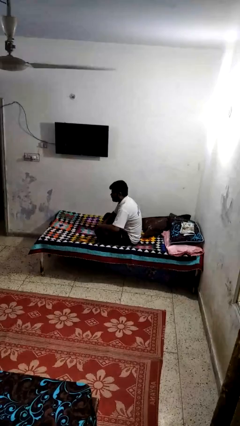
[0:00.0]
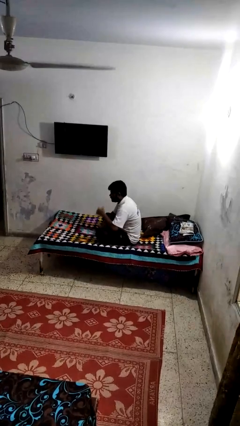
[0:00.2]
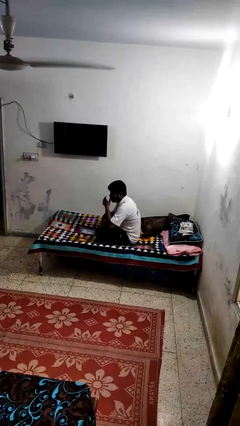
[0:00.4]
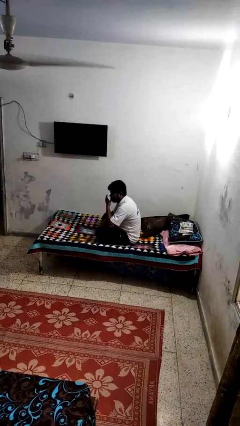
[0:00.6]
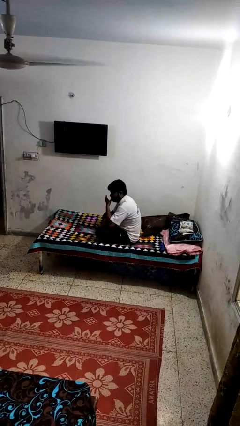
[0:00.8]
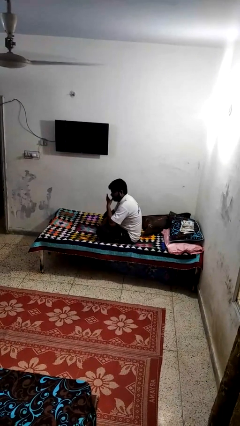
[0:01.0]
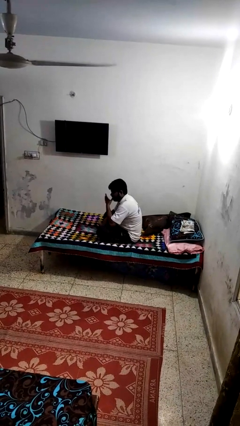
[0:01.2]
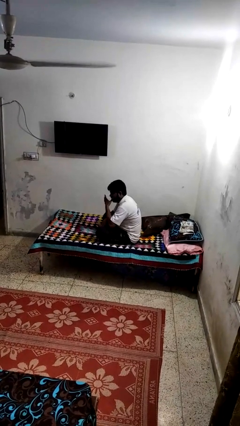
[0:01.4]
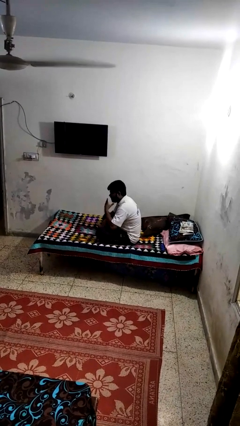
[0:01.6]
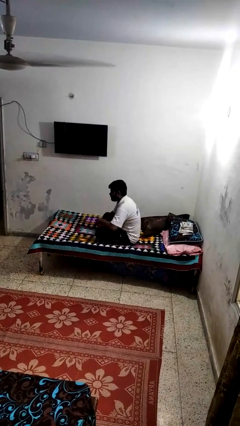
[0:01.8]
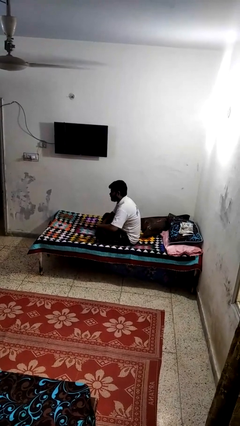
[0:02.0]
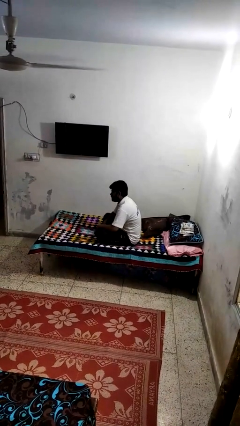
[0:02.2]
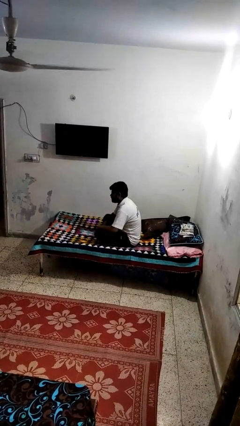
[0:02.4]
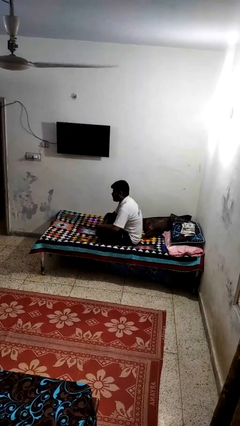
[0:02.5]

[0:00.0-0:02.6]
person scratches face

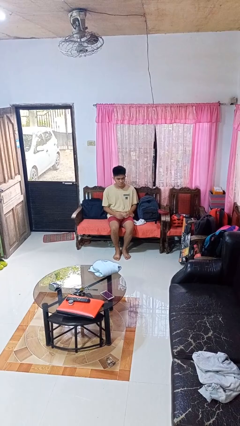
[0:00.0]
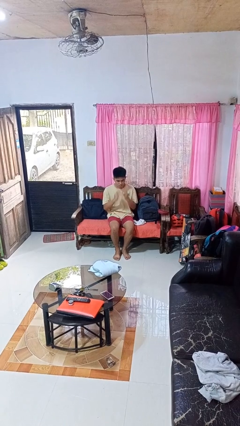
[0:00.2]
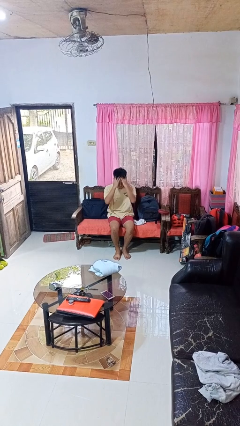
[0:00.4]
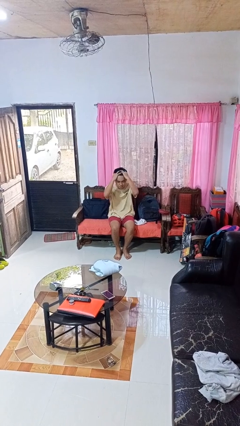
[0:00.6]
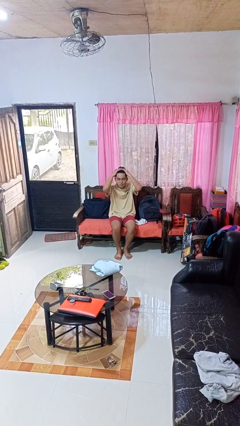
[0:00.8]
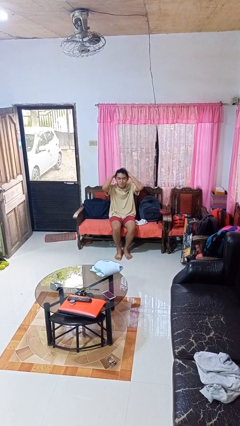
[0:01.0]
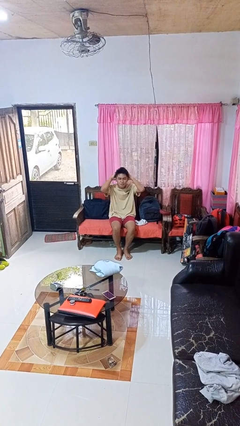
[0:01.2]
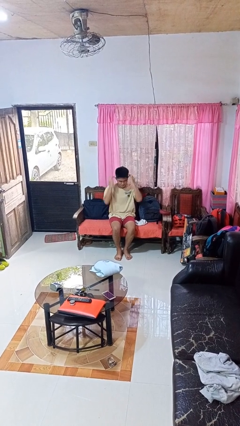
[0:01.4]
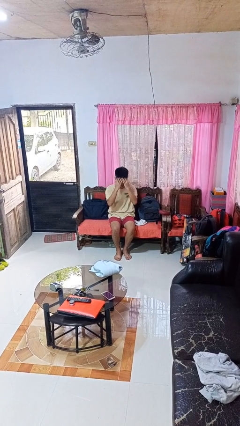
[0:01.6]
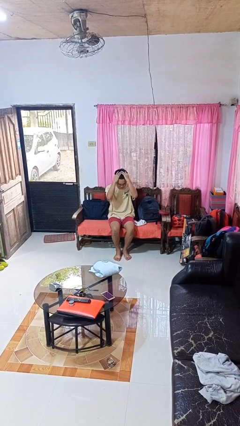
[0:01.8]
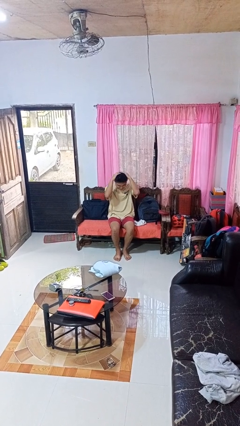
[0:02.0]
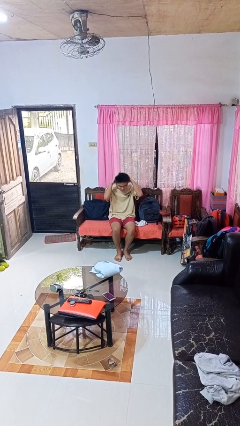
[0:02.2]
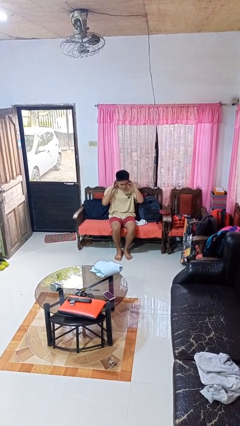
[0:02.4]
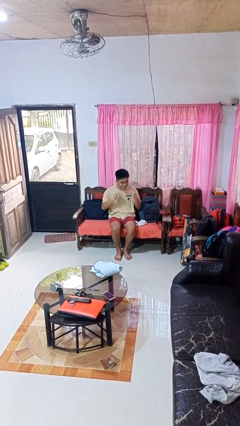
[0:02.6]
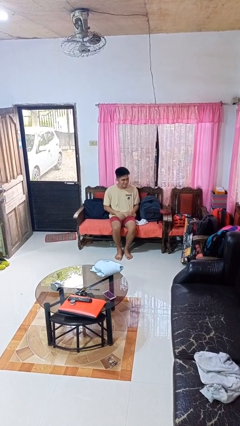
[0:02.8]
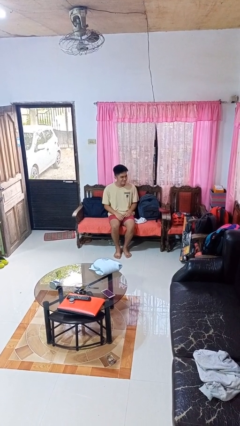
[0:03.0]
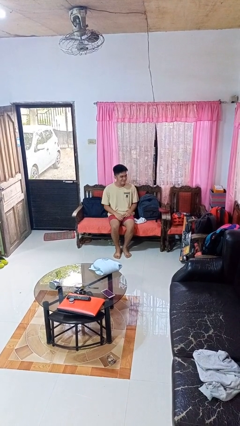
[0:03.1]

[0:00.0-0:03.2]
person strokes hair

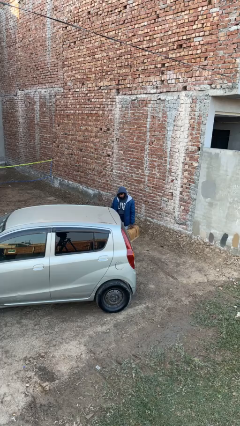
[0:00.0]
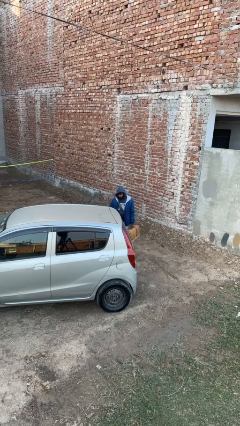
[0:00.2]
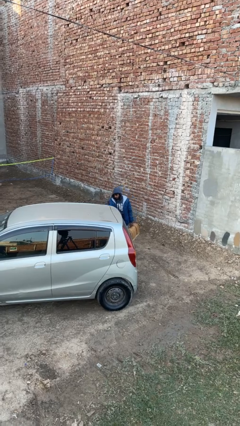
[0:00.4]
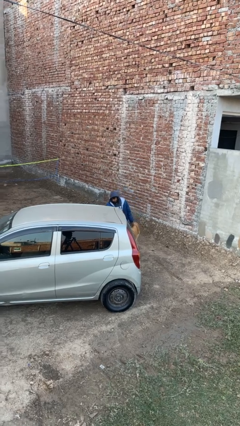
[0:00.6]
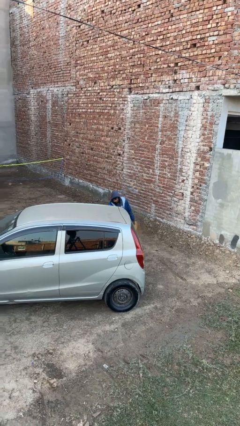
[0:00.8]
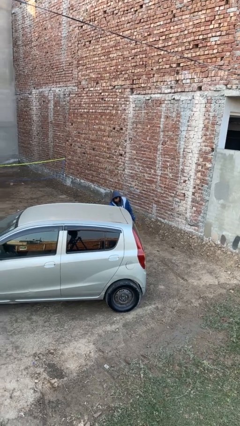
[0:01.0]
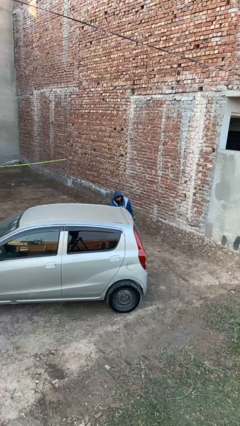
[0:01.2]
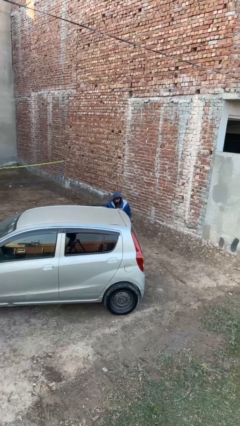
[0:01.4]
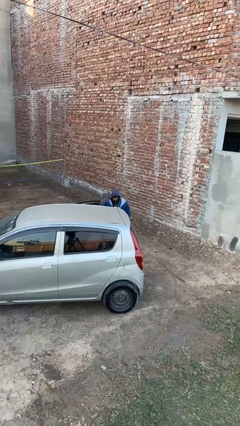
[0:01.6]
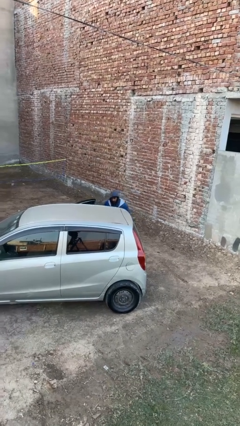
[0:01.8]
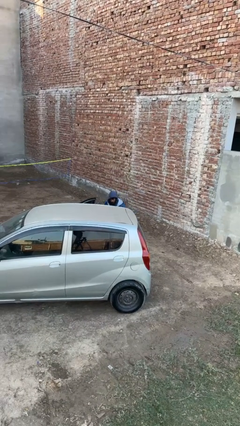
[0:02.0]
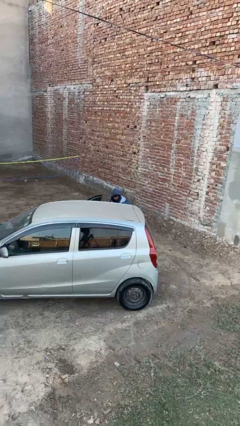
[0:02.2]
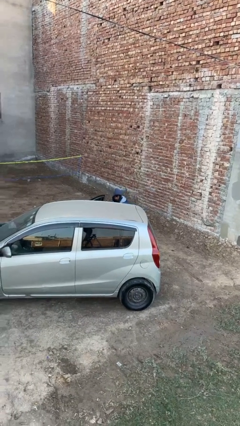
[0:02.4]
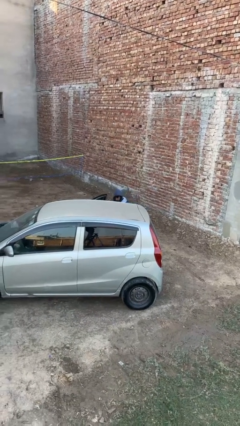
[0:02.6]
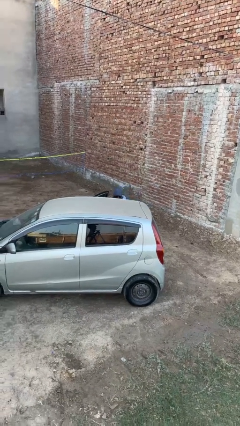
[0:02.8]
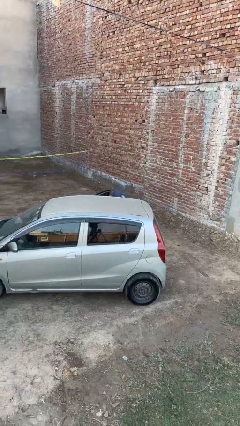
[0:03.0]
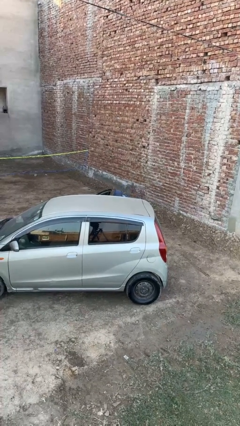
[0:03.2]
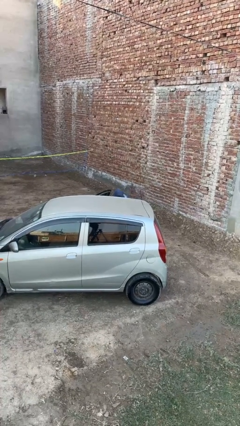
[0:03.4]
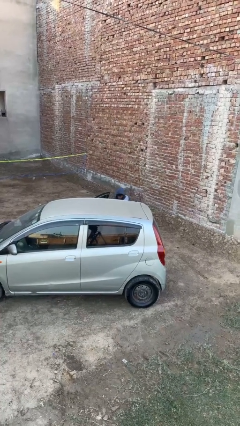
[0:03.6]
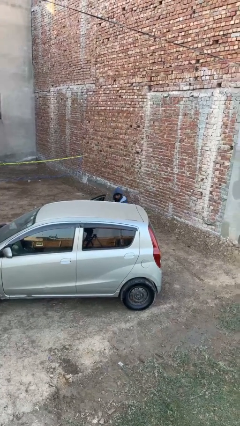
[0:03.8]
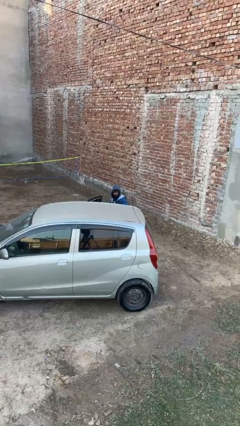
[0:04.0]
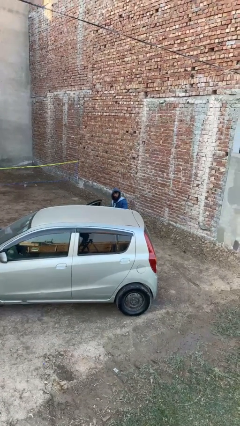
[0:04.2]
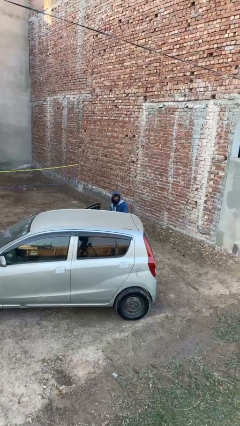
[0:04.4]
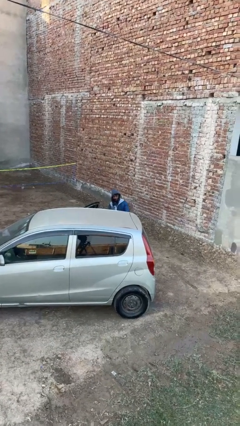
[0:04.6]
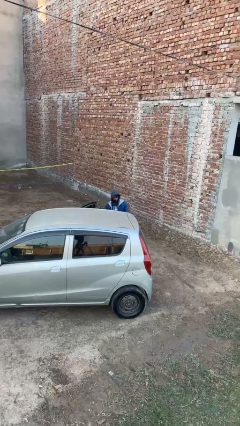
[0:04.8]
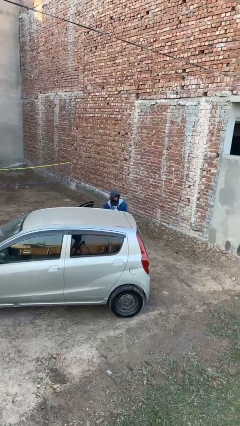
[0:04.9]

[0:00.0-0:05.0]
person loads car

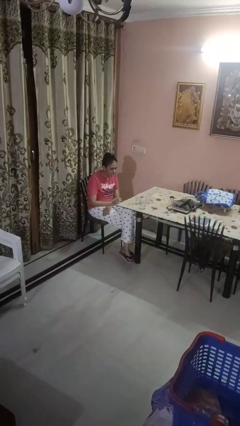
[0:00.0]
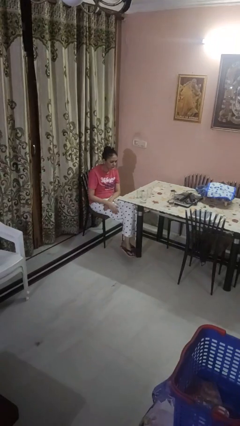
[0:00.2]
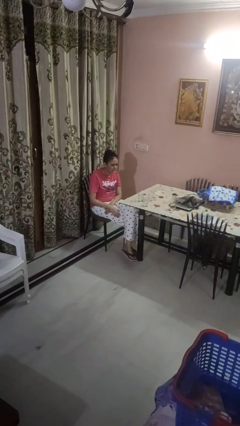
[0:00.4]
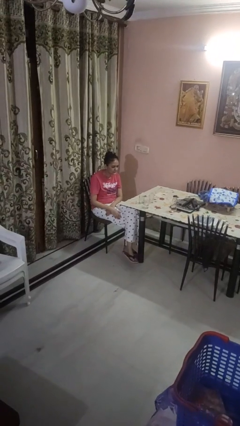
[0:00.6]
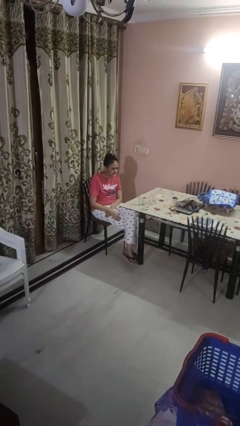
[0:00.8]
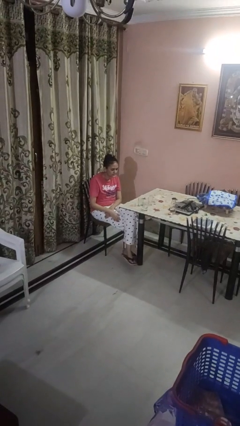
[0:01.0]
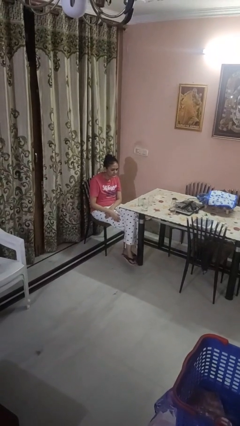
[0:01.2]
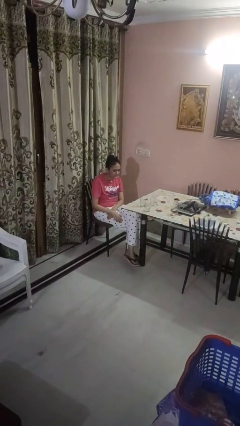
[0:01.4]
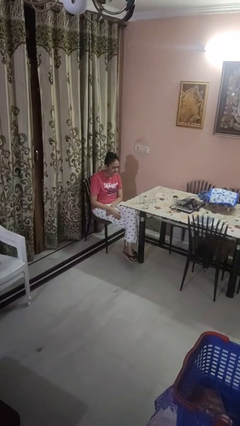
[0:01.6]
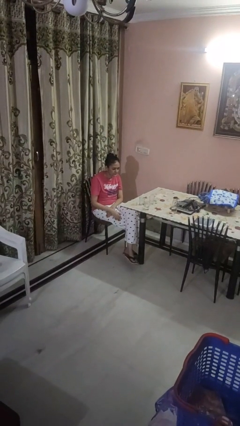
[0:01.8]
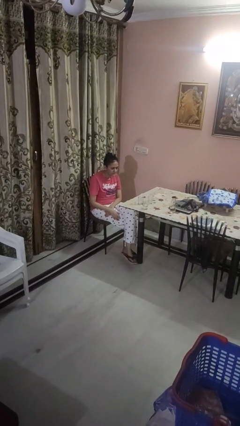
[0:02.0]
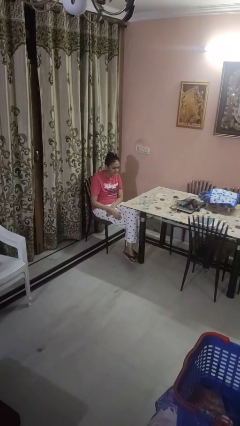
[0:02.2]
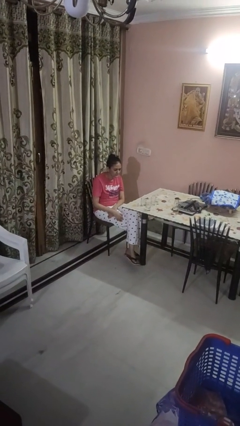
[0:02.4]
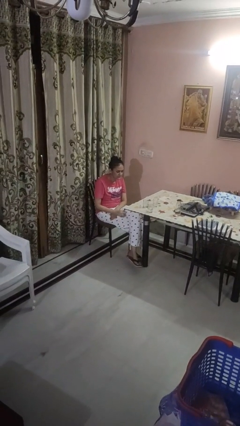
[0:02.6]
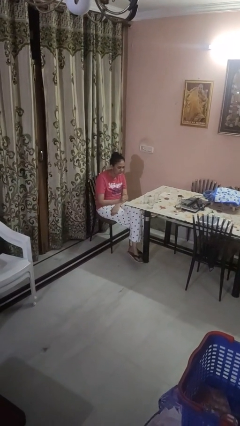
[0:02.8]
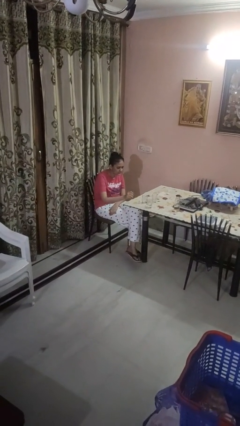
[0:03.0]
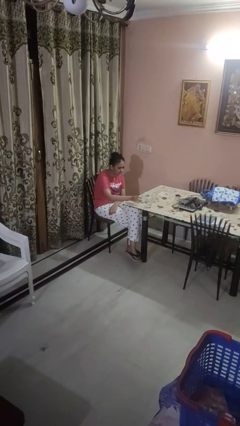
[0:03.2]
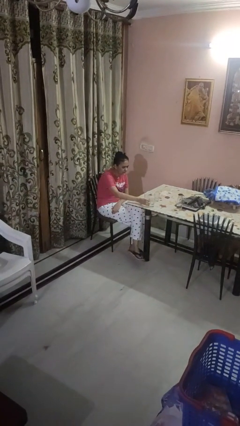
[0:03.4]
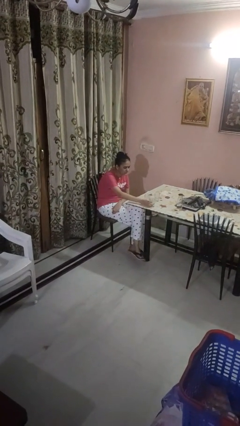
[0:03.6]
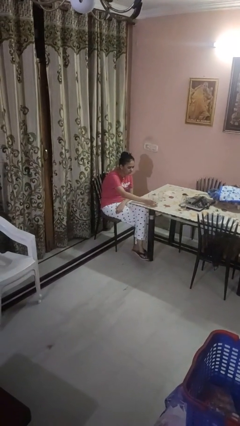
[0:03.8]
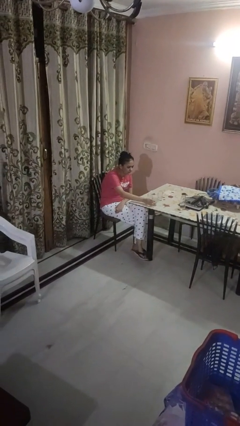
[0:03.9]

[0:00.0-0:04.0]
person puts down object on table

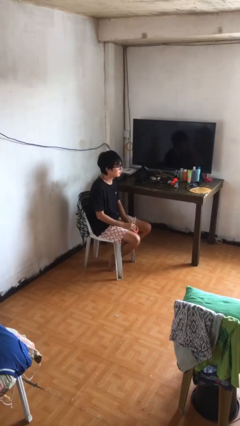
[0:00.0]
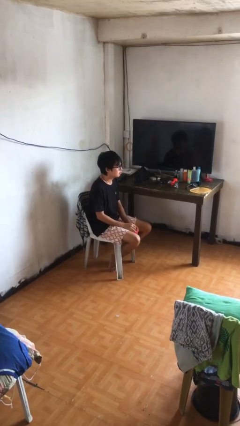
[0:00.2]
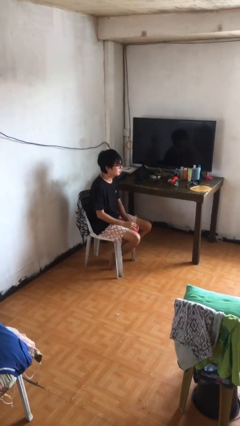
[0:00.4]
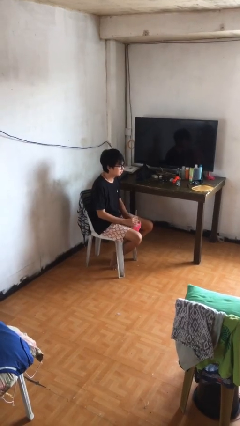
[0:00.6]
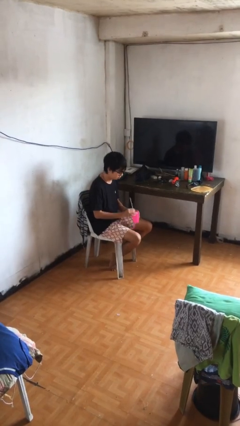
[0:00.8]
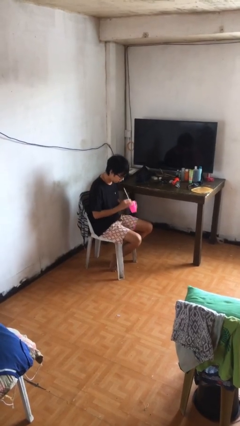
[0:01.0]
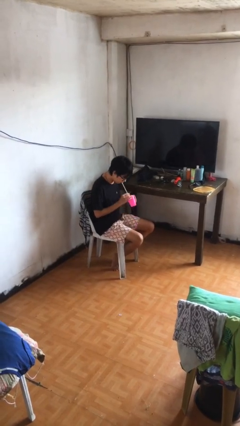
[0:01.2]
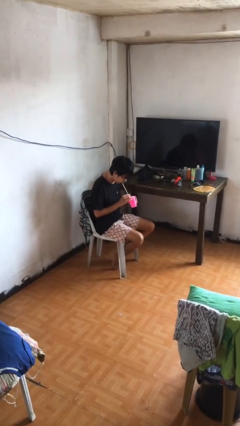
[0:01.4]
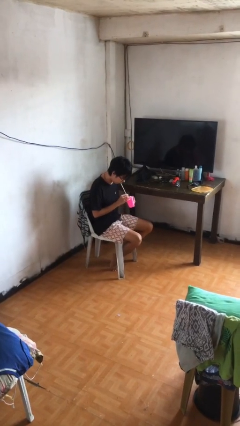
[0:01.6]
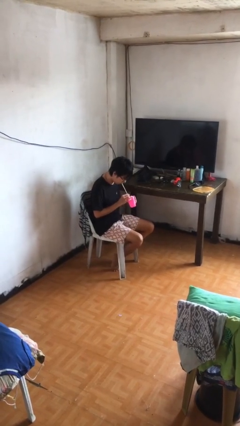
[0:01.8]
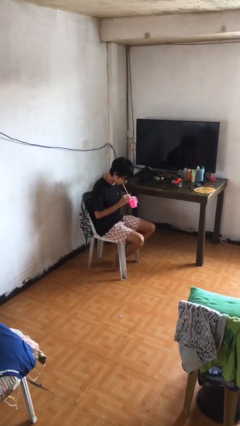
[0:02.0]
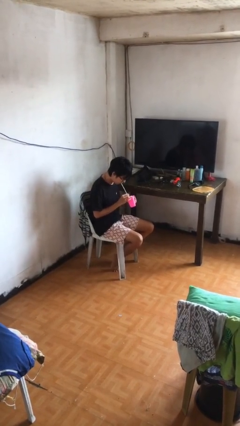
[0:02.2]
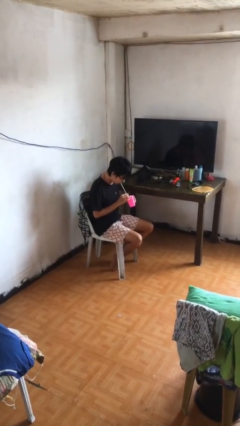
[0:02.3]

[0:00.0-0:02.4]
person drinks from straw

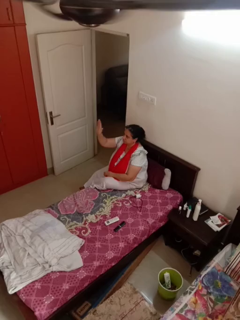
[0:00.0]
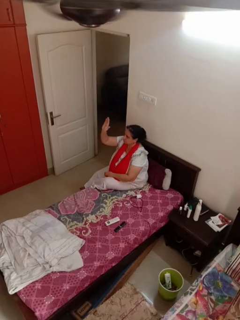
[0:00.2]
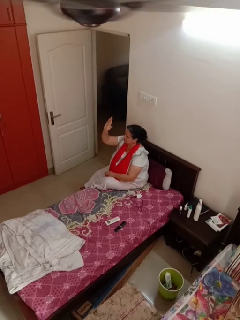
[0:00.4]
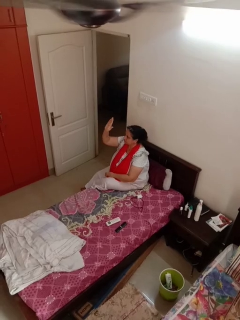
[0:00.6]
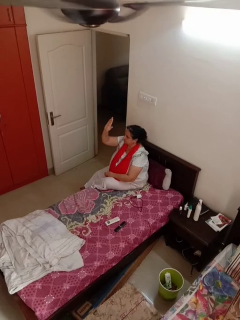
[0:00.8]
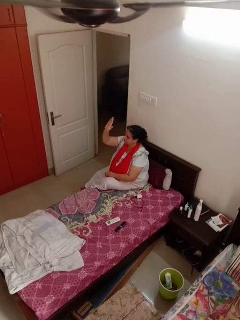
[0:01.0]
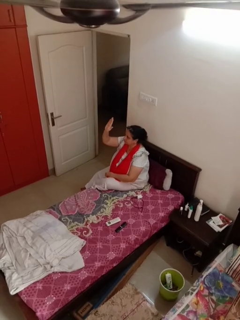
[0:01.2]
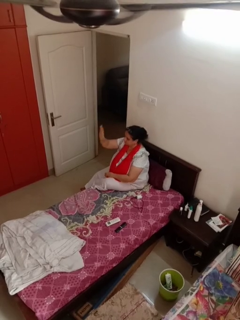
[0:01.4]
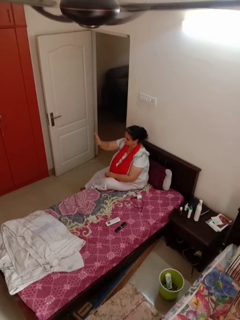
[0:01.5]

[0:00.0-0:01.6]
person gestures raise hand
